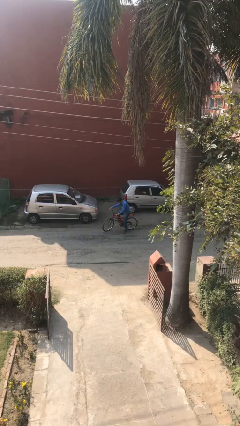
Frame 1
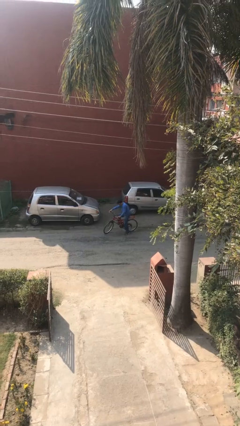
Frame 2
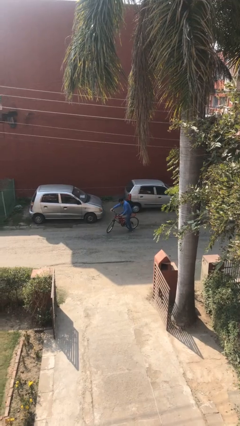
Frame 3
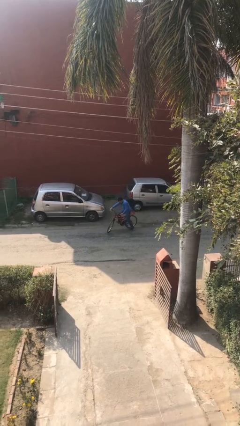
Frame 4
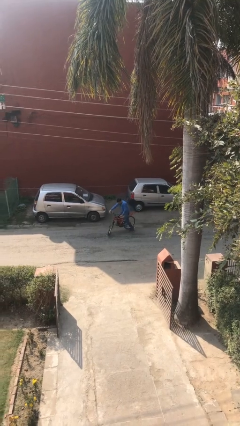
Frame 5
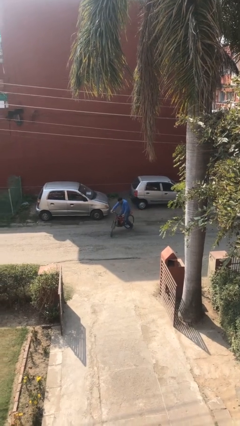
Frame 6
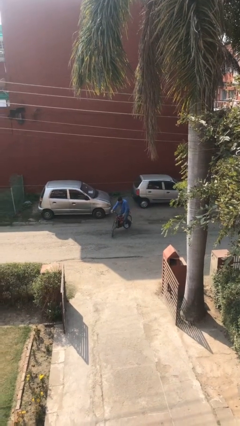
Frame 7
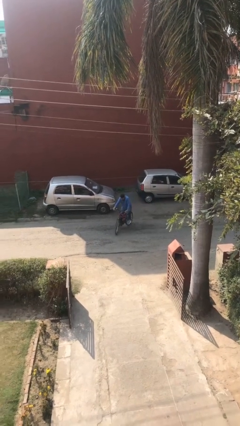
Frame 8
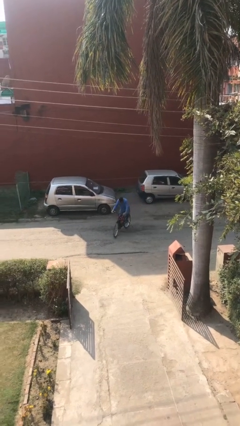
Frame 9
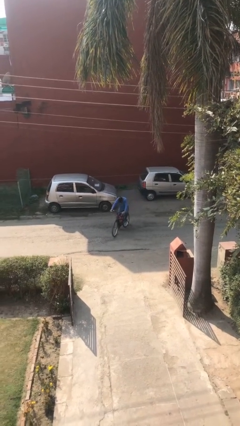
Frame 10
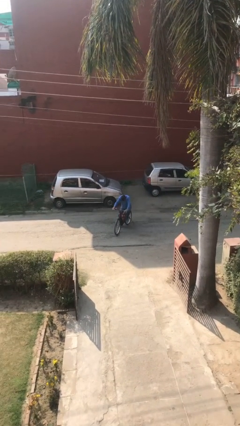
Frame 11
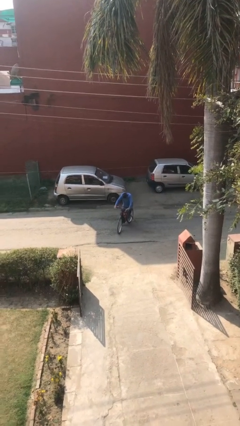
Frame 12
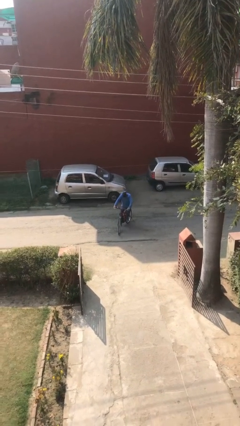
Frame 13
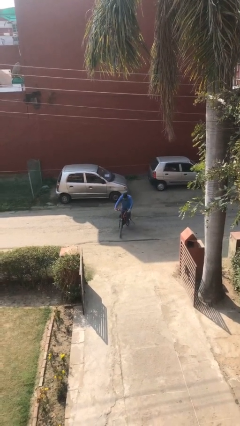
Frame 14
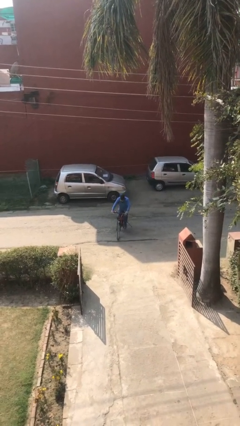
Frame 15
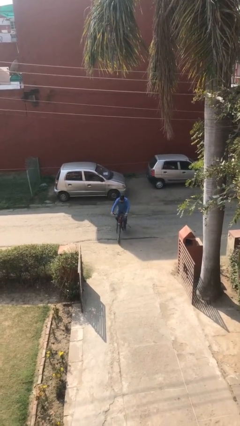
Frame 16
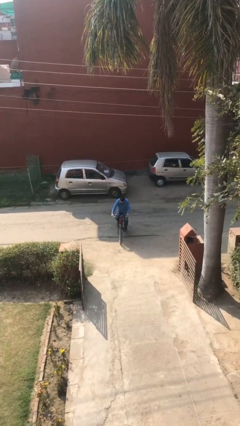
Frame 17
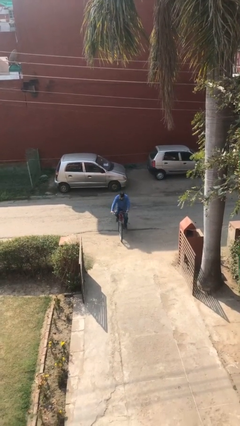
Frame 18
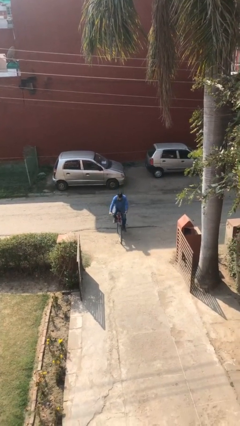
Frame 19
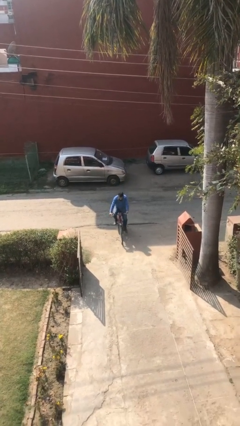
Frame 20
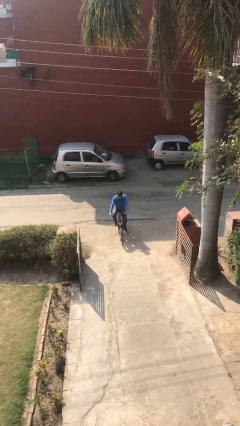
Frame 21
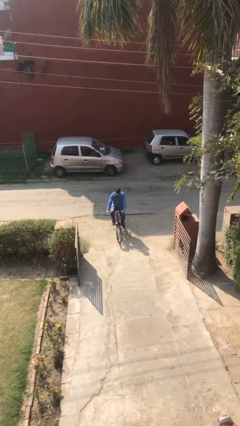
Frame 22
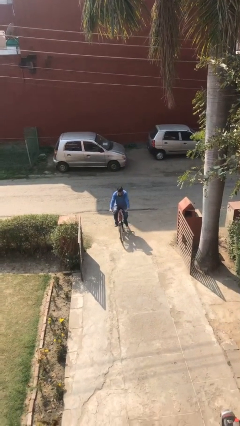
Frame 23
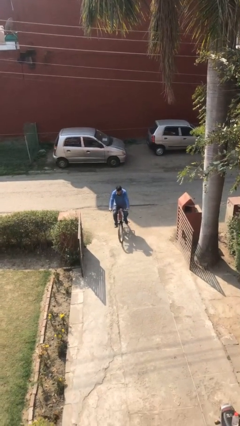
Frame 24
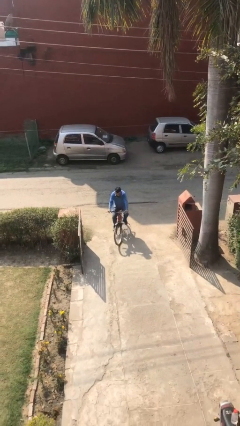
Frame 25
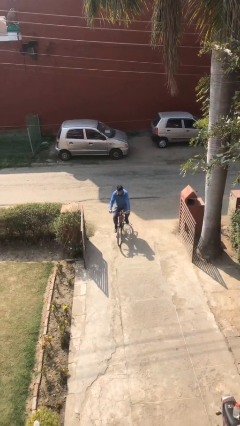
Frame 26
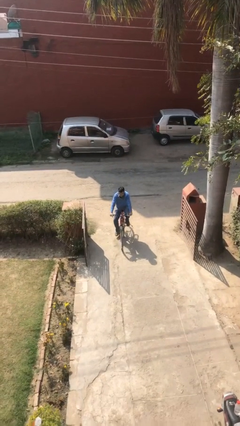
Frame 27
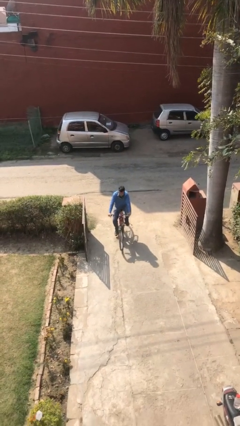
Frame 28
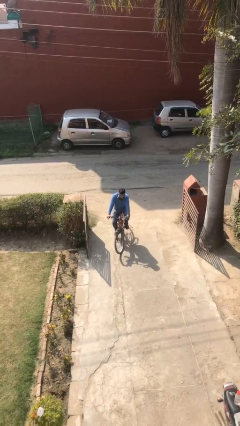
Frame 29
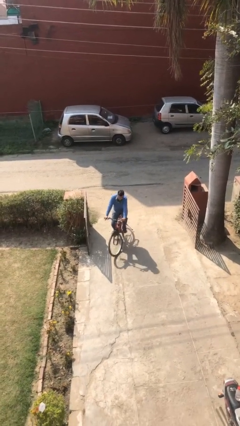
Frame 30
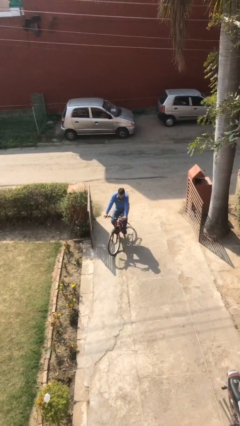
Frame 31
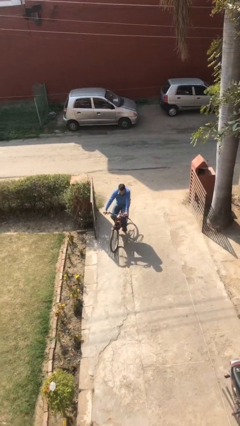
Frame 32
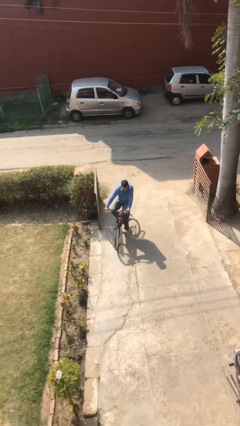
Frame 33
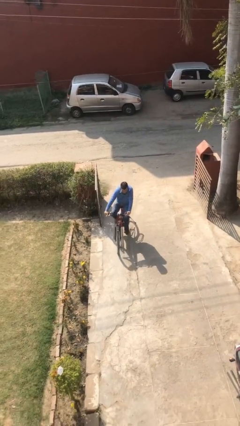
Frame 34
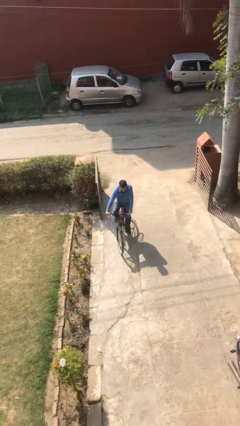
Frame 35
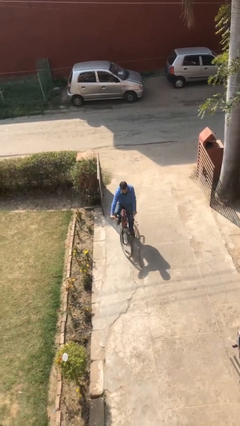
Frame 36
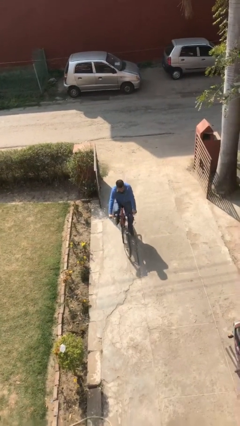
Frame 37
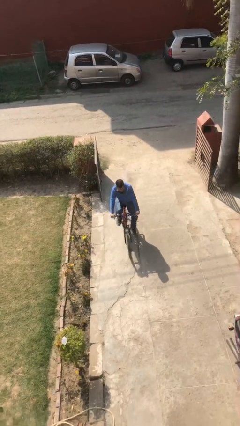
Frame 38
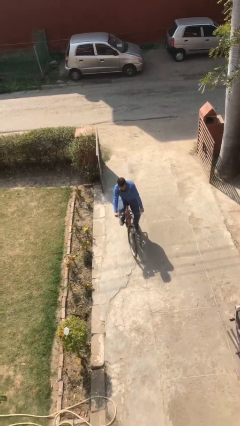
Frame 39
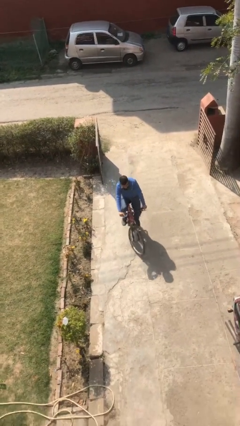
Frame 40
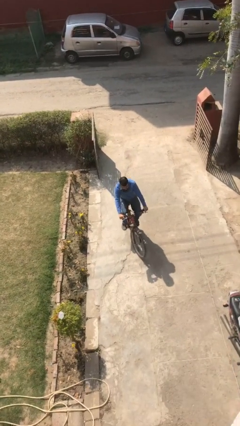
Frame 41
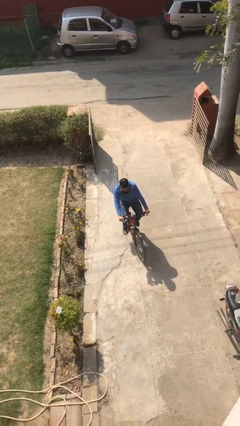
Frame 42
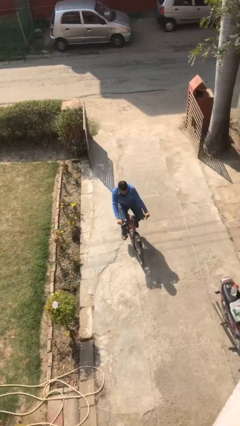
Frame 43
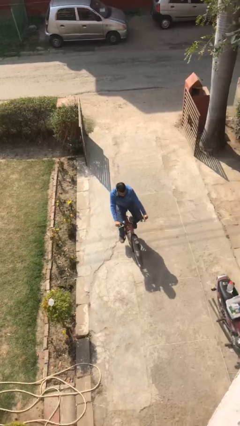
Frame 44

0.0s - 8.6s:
person rides bicycle

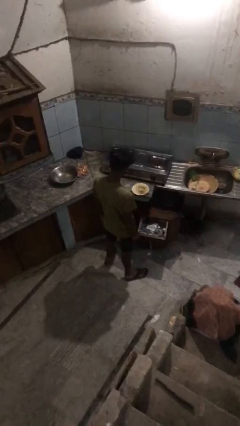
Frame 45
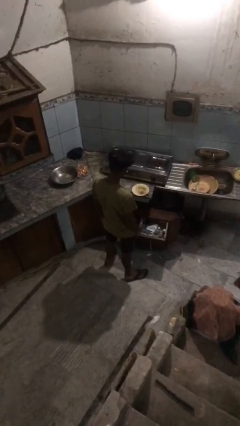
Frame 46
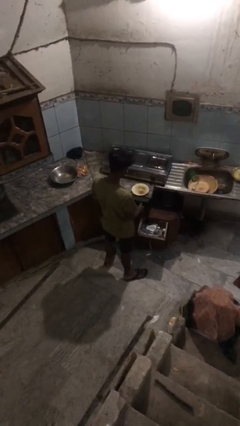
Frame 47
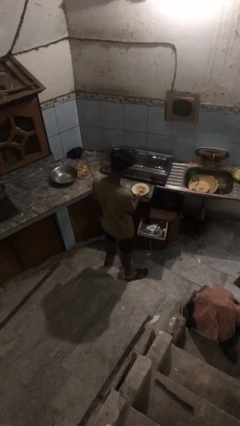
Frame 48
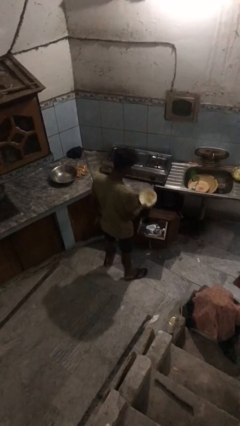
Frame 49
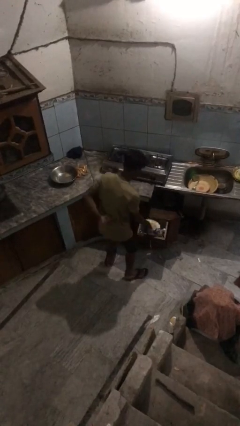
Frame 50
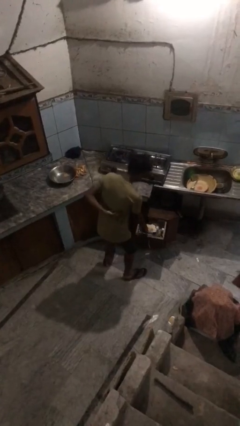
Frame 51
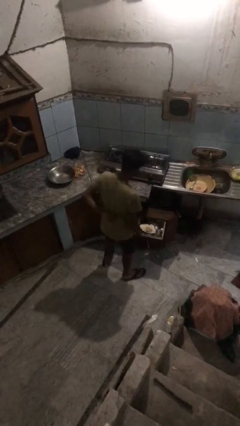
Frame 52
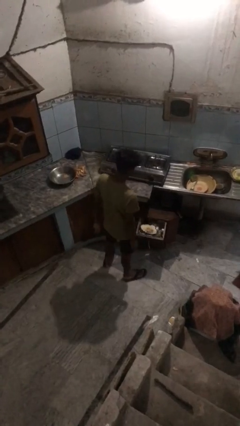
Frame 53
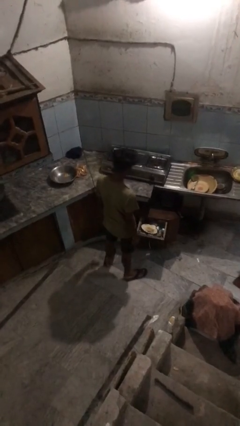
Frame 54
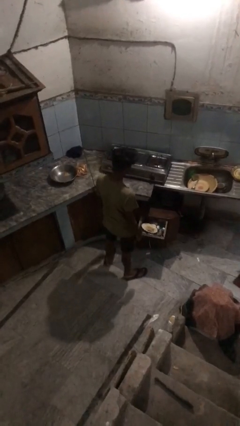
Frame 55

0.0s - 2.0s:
person puts object into kitchen drawer

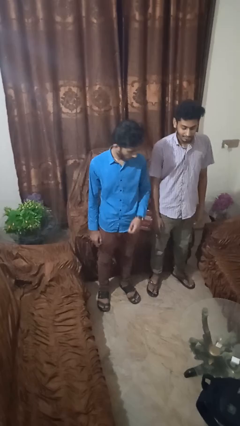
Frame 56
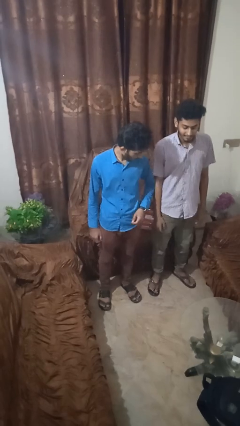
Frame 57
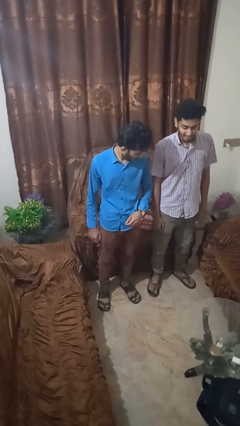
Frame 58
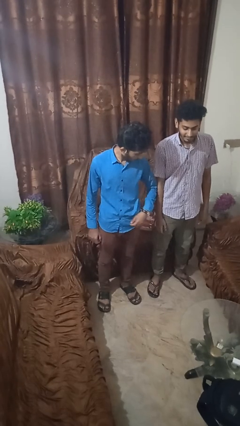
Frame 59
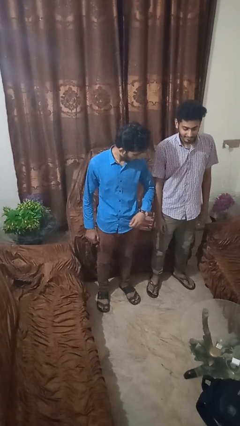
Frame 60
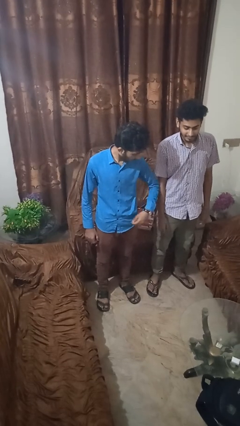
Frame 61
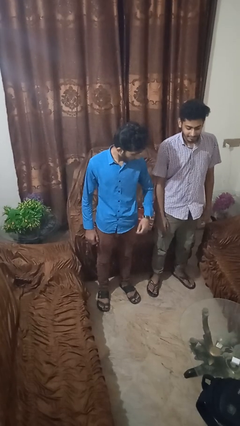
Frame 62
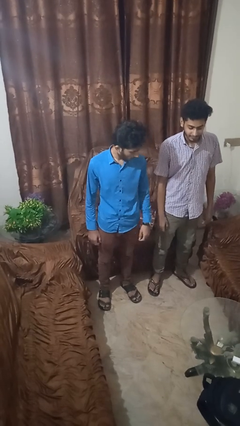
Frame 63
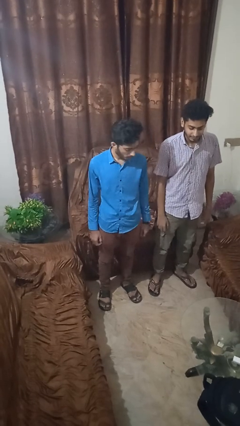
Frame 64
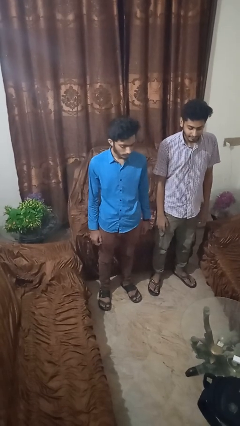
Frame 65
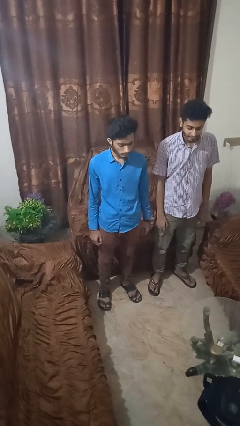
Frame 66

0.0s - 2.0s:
person nudges person with elbow

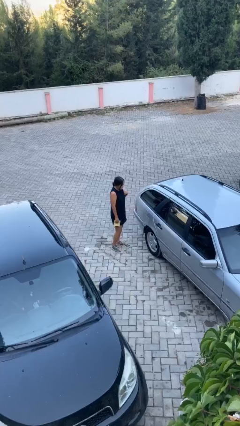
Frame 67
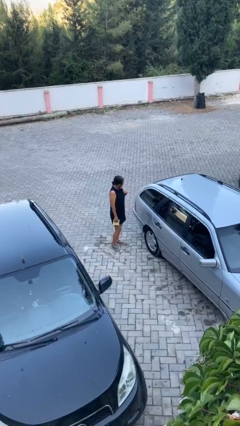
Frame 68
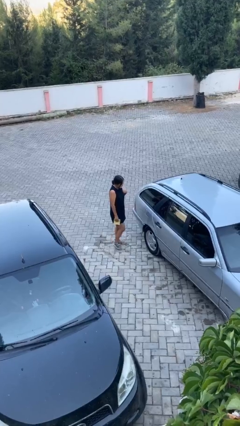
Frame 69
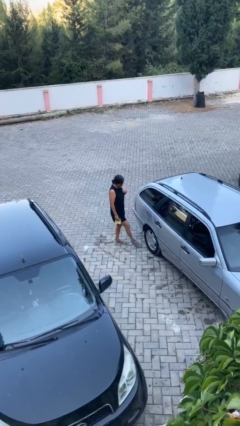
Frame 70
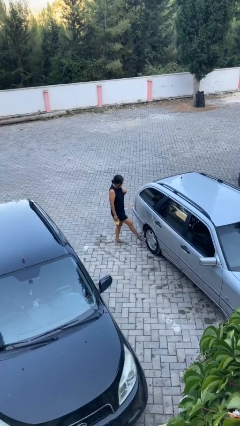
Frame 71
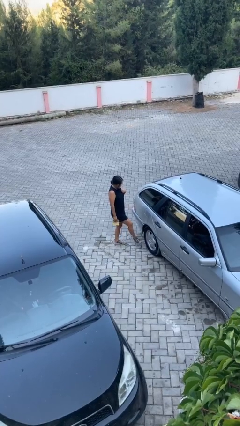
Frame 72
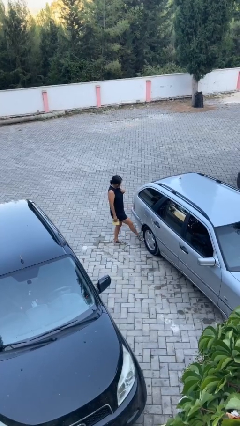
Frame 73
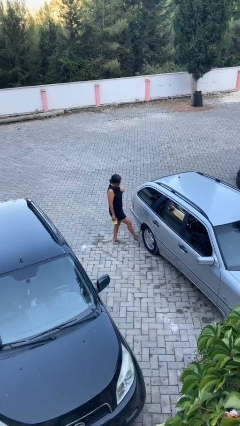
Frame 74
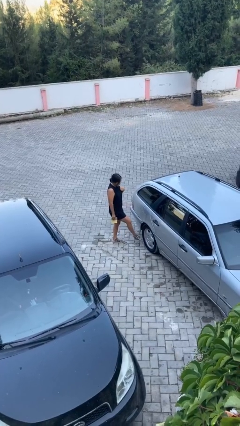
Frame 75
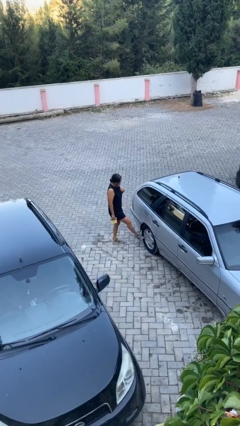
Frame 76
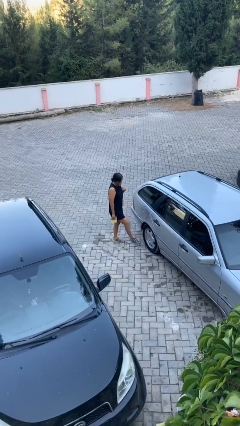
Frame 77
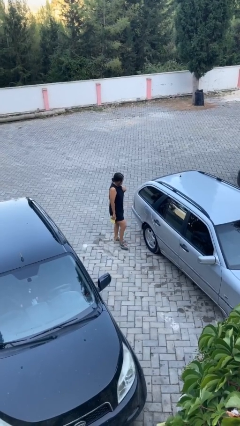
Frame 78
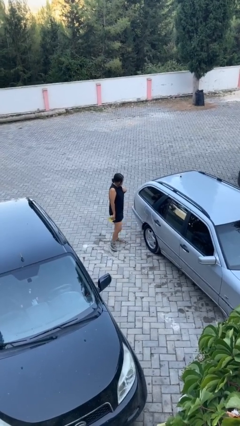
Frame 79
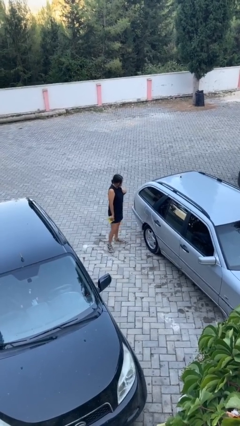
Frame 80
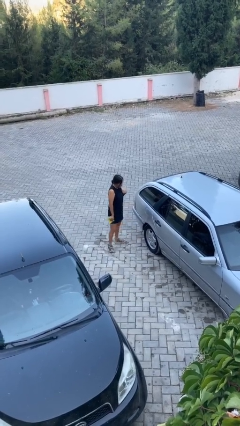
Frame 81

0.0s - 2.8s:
person kicks car tires

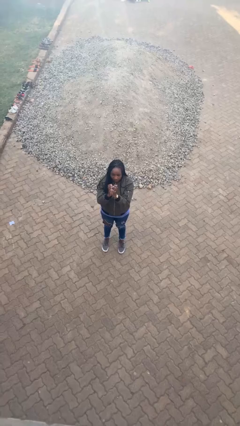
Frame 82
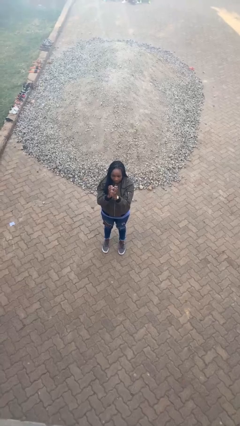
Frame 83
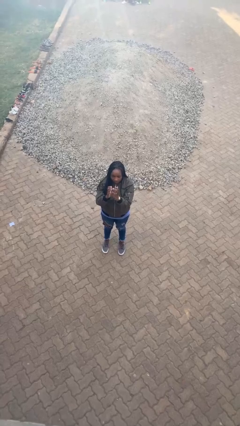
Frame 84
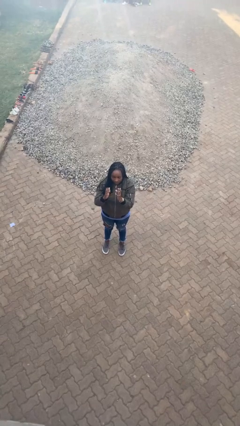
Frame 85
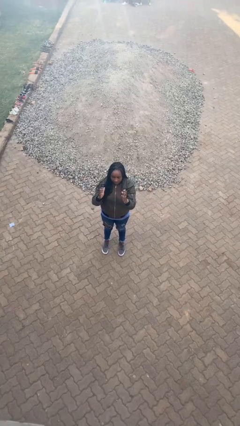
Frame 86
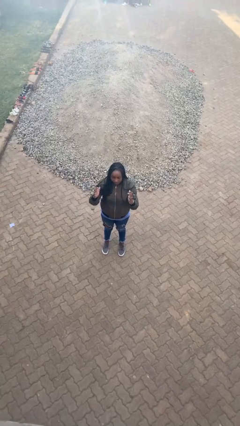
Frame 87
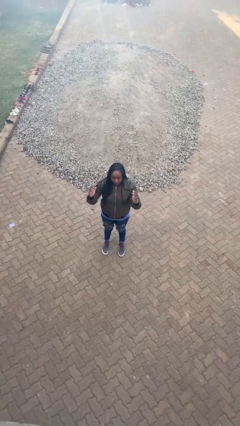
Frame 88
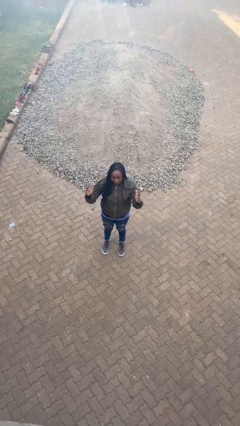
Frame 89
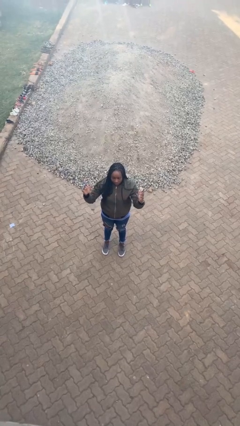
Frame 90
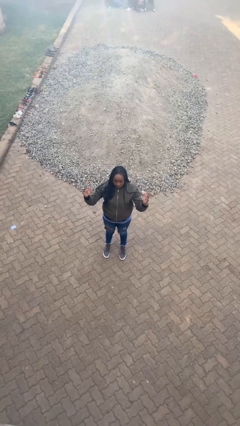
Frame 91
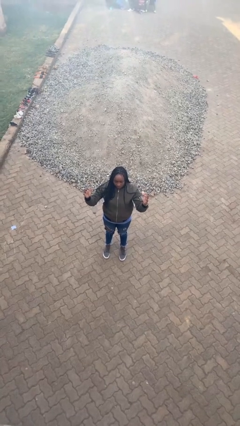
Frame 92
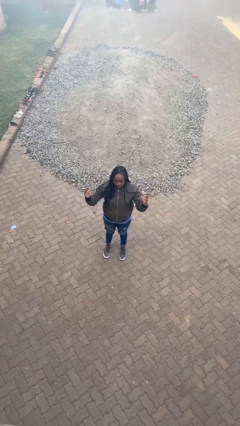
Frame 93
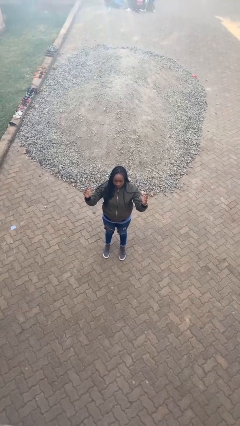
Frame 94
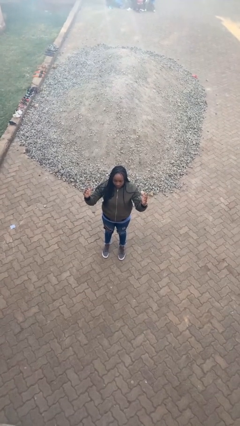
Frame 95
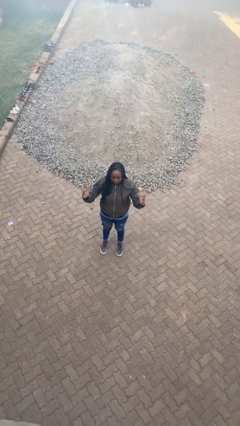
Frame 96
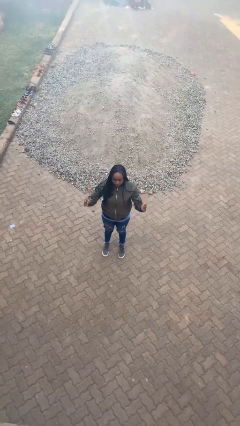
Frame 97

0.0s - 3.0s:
person gestures zoom out
